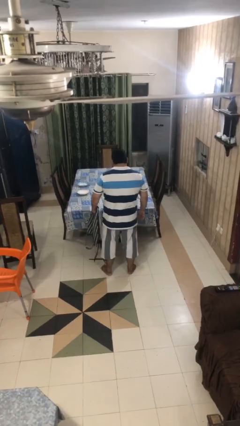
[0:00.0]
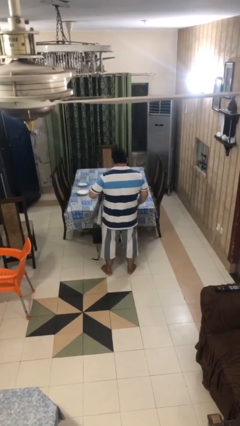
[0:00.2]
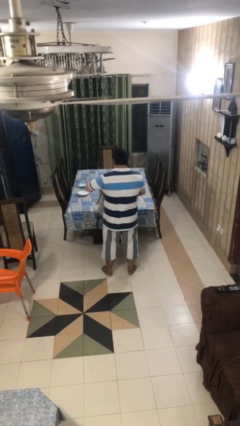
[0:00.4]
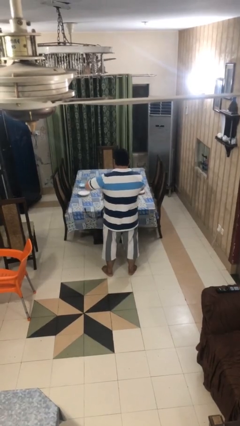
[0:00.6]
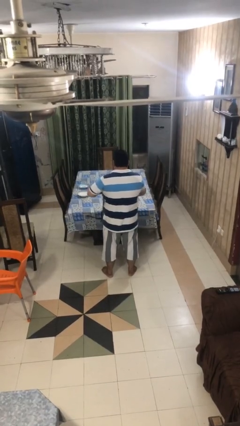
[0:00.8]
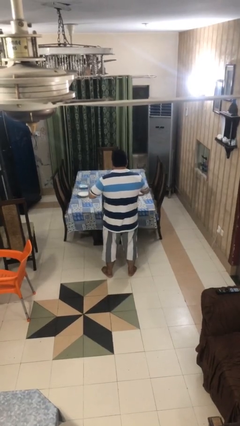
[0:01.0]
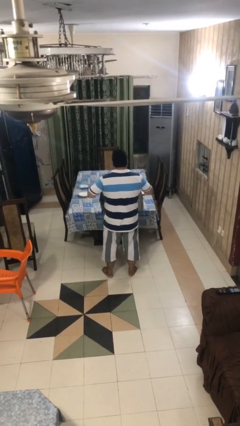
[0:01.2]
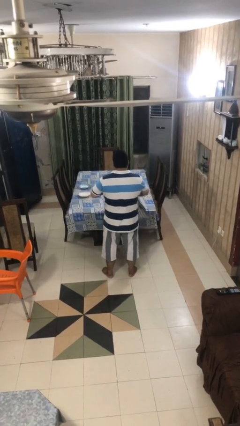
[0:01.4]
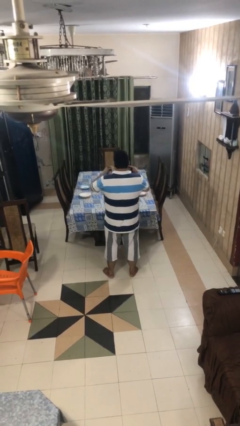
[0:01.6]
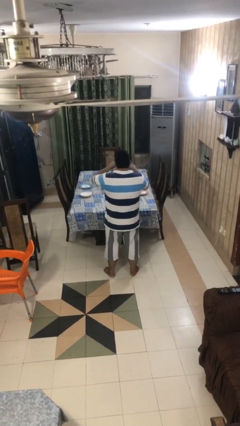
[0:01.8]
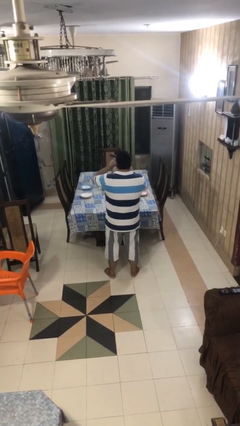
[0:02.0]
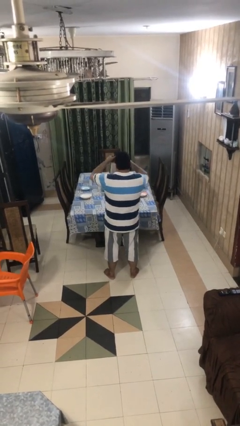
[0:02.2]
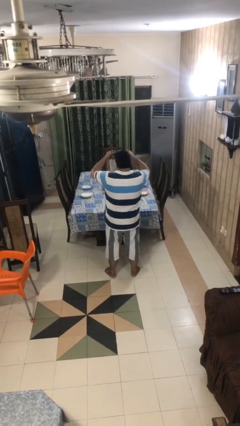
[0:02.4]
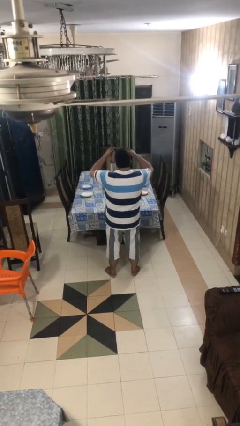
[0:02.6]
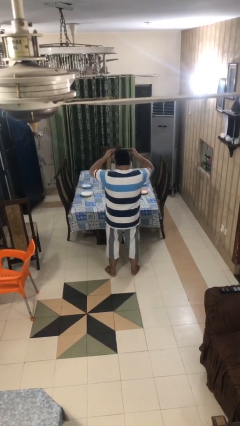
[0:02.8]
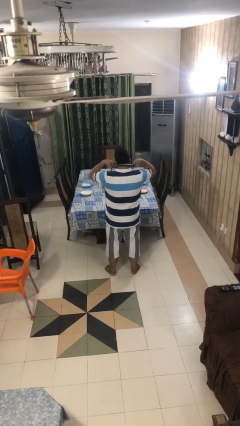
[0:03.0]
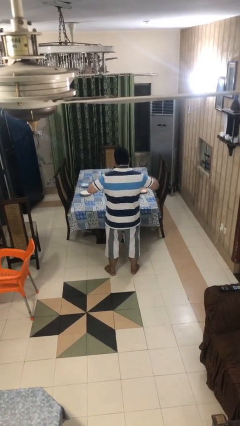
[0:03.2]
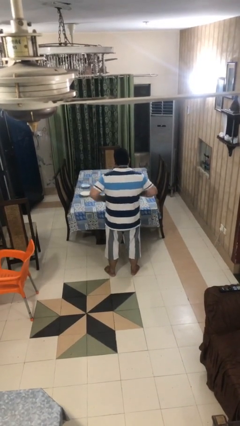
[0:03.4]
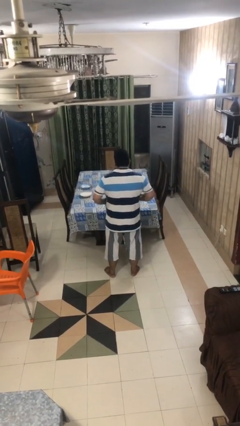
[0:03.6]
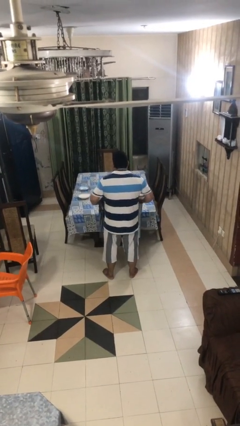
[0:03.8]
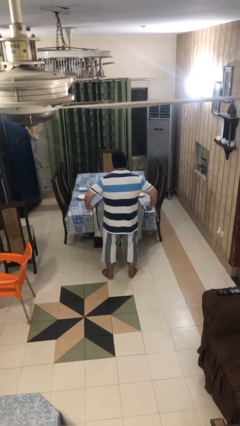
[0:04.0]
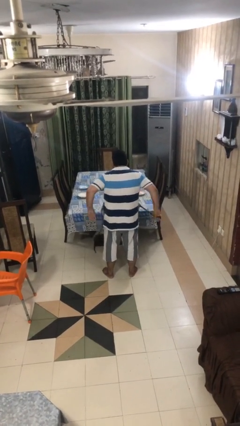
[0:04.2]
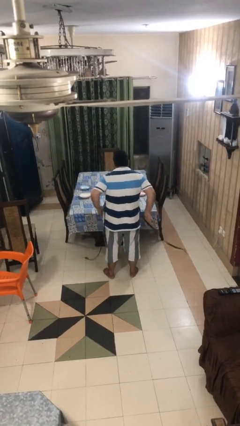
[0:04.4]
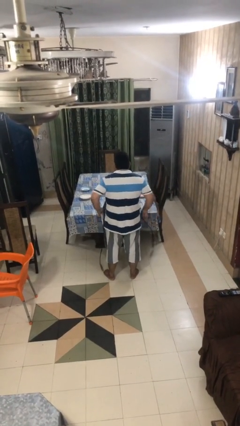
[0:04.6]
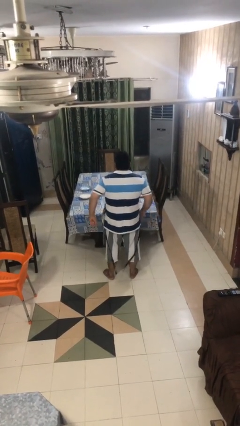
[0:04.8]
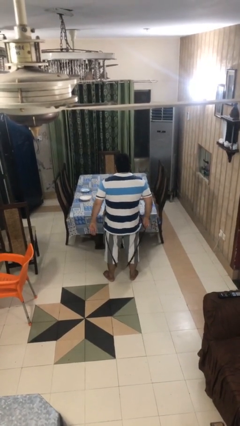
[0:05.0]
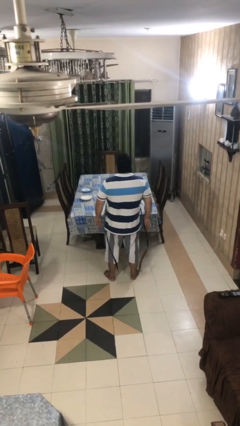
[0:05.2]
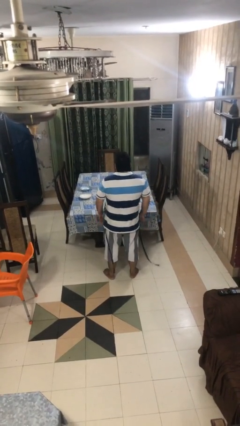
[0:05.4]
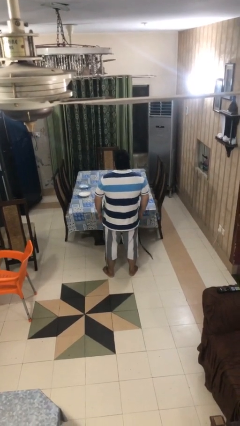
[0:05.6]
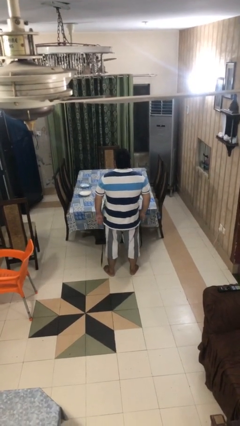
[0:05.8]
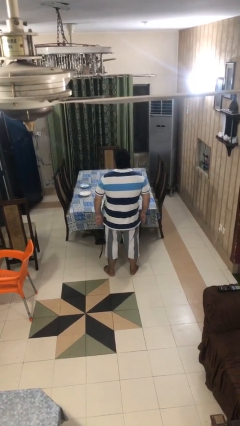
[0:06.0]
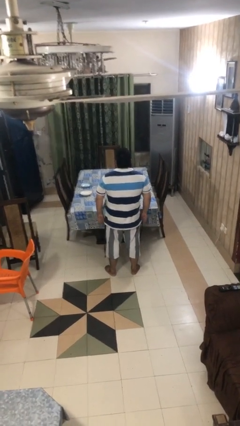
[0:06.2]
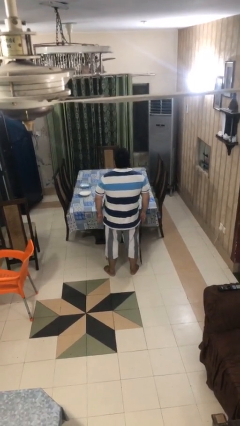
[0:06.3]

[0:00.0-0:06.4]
person puts on apron

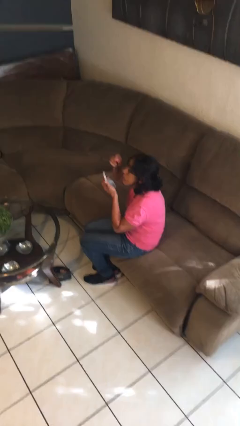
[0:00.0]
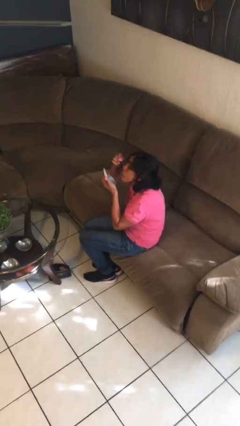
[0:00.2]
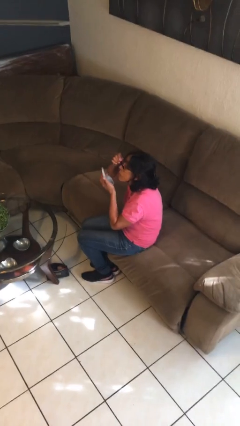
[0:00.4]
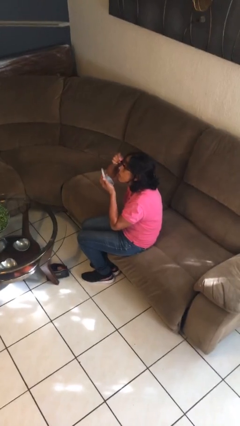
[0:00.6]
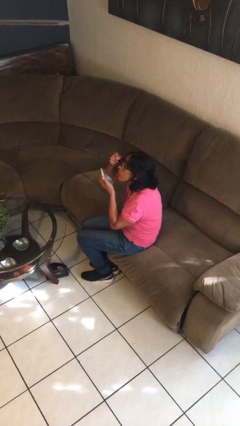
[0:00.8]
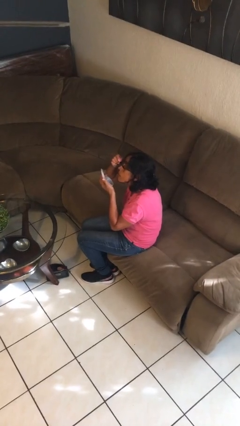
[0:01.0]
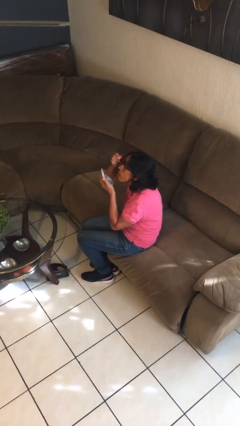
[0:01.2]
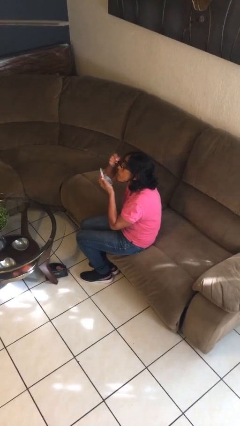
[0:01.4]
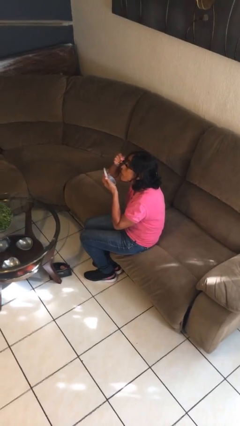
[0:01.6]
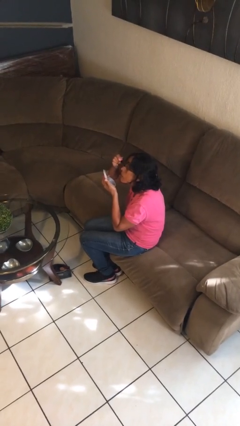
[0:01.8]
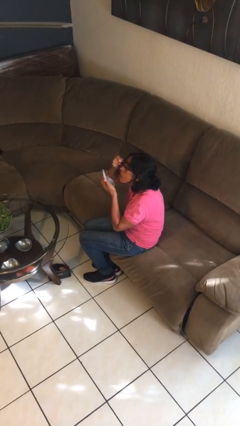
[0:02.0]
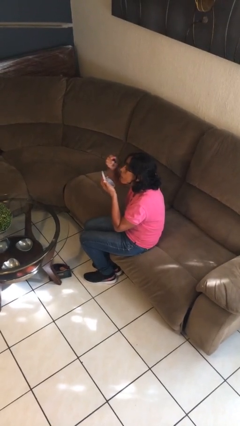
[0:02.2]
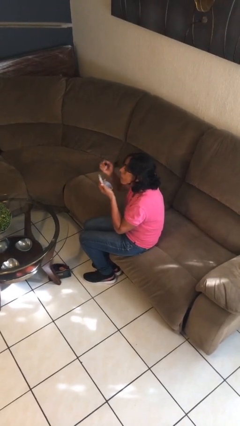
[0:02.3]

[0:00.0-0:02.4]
person applies eye makeup

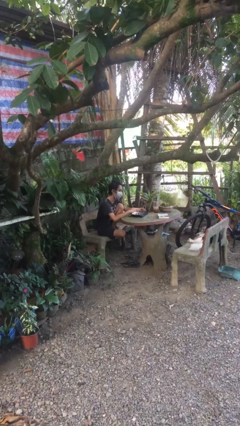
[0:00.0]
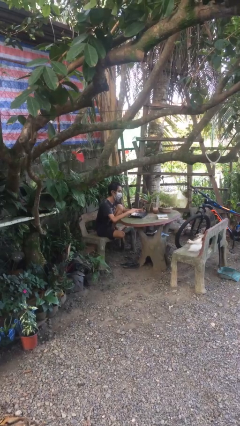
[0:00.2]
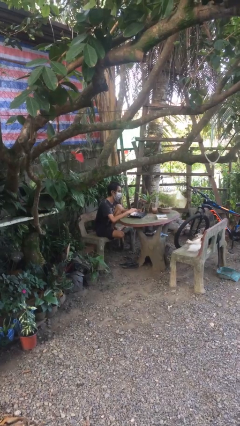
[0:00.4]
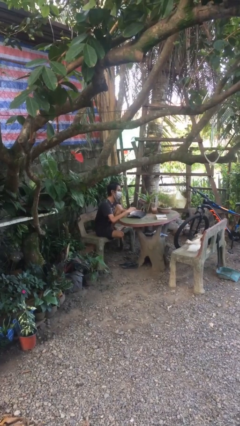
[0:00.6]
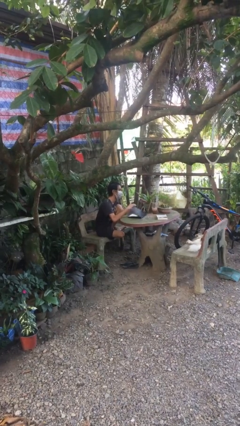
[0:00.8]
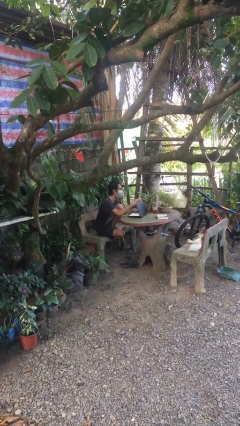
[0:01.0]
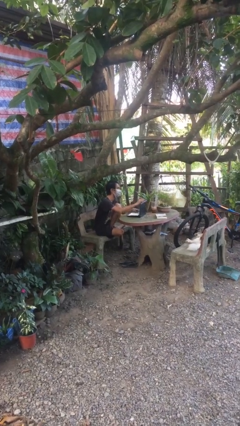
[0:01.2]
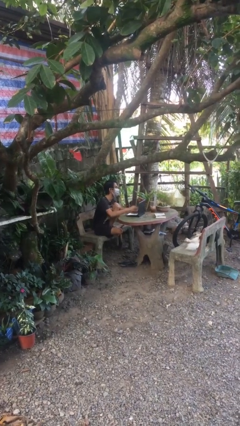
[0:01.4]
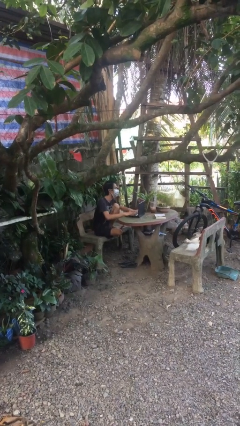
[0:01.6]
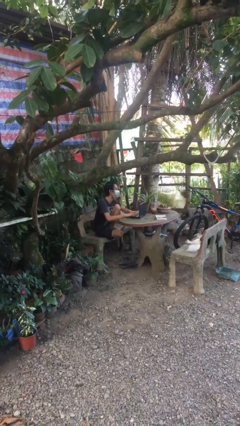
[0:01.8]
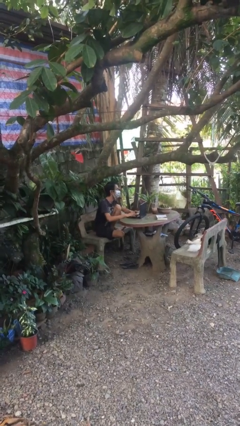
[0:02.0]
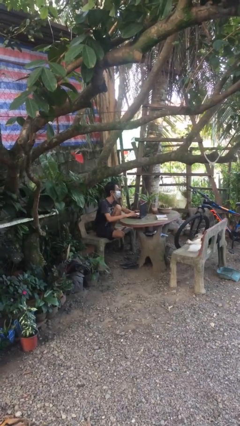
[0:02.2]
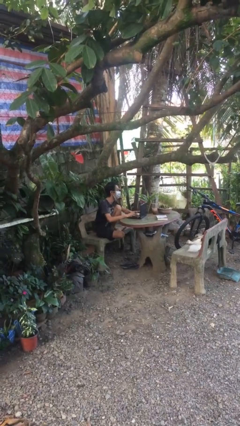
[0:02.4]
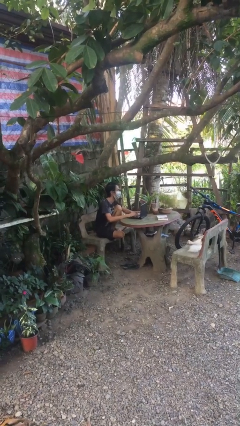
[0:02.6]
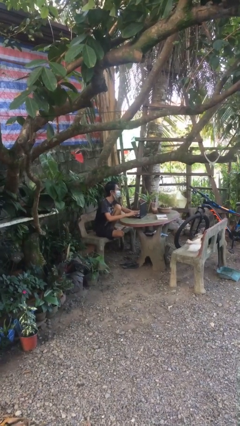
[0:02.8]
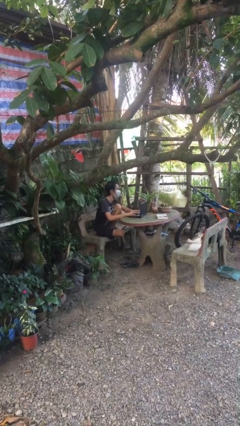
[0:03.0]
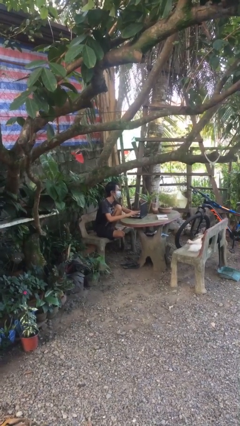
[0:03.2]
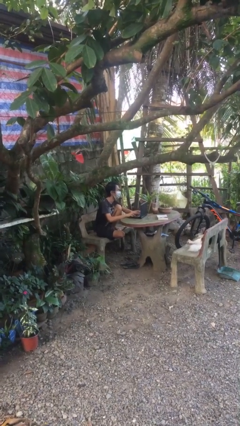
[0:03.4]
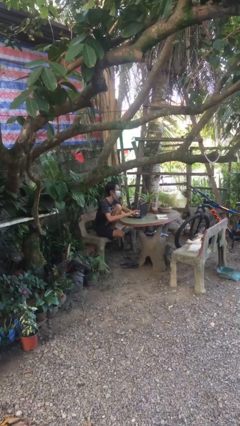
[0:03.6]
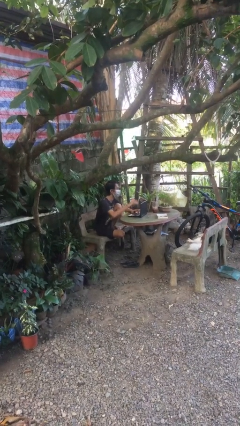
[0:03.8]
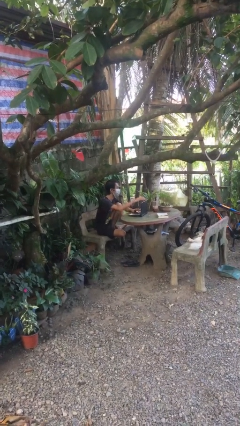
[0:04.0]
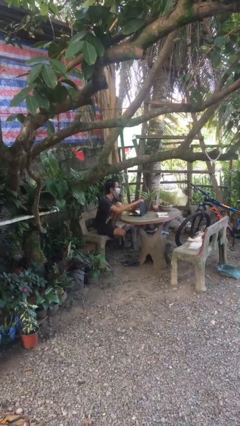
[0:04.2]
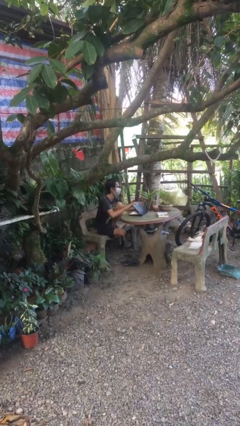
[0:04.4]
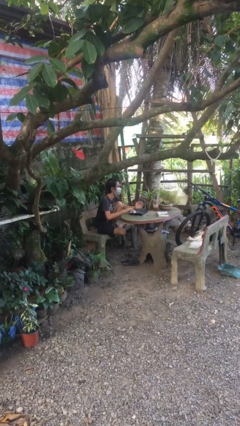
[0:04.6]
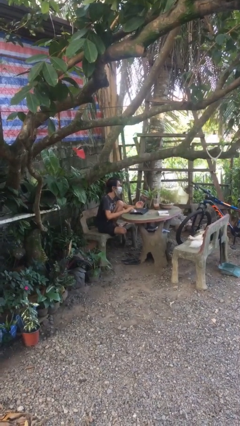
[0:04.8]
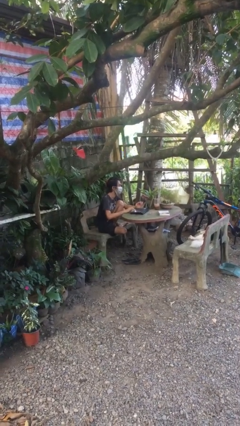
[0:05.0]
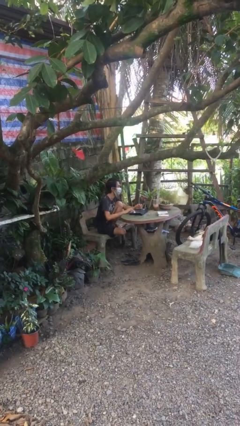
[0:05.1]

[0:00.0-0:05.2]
person interacts with laptop

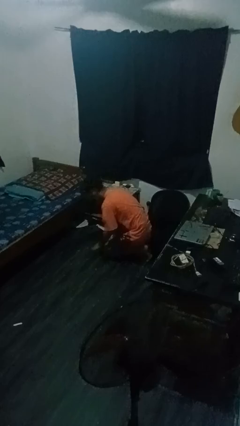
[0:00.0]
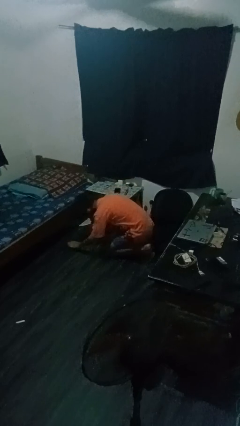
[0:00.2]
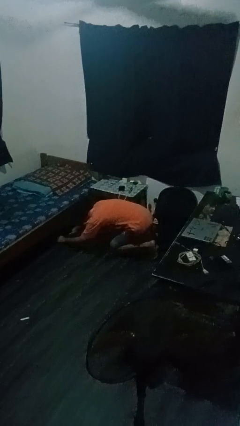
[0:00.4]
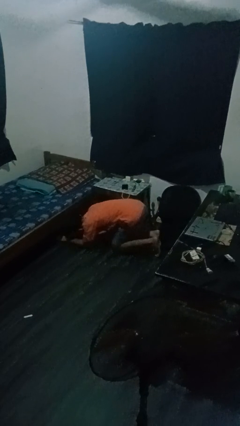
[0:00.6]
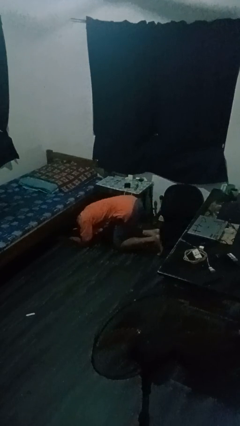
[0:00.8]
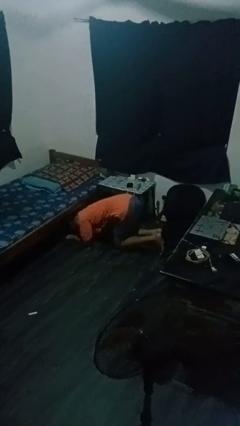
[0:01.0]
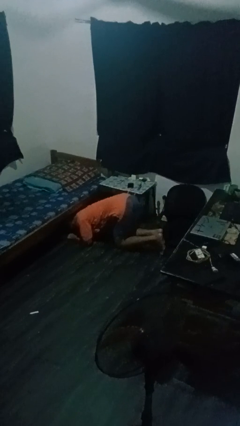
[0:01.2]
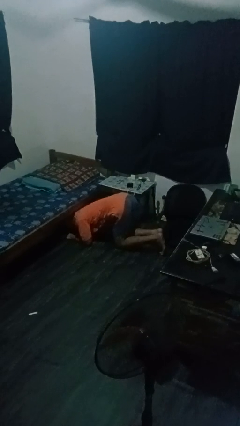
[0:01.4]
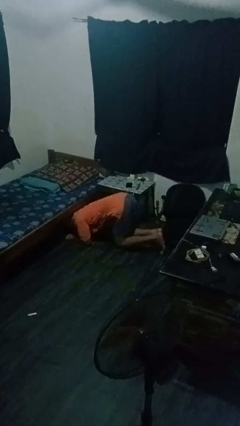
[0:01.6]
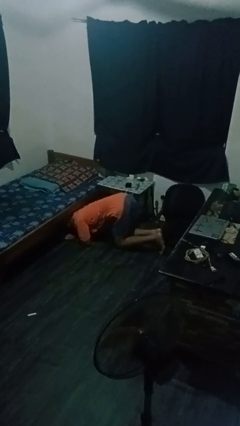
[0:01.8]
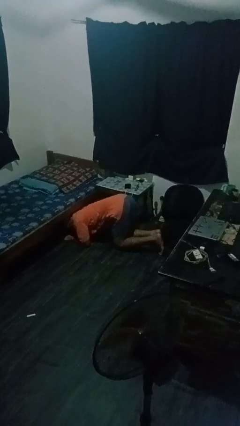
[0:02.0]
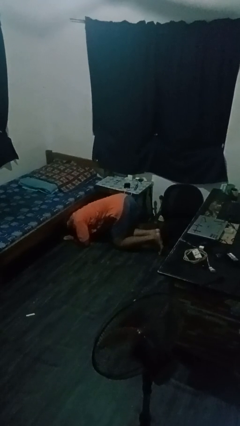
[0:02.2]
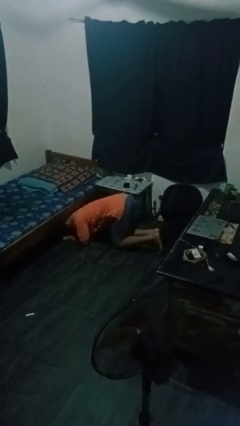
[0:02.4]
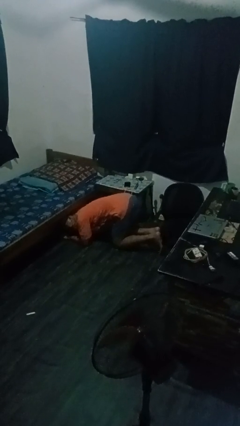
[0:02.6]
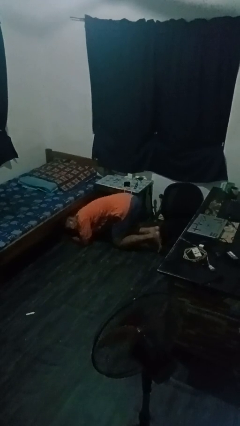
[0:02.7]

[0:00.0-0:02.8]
person searches under bed

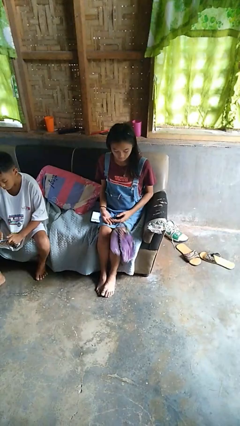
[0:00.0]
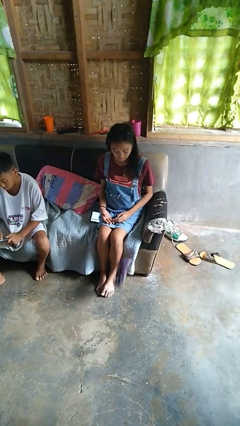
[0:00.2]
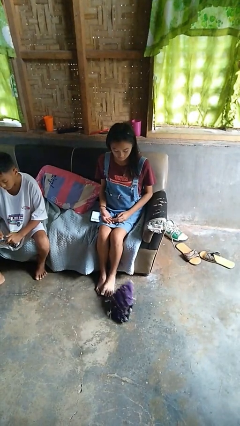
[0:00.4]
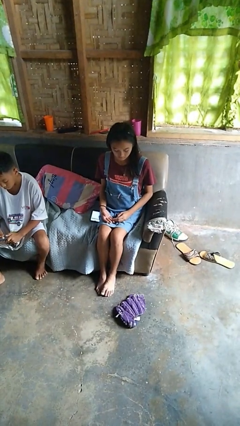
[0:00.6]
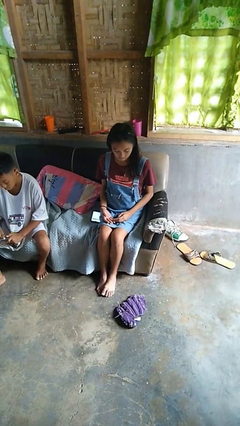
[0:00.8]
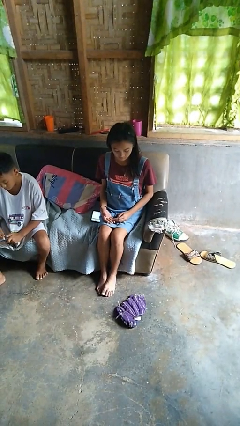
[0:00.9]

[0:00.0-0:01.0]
person drops object
